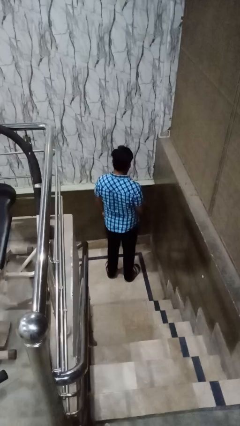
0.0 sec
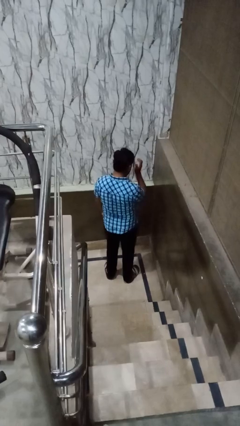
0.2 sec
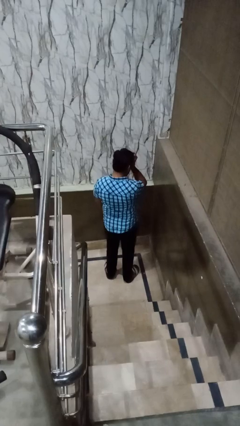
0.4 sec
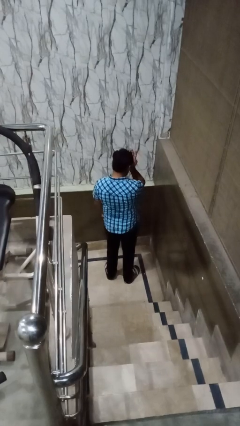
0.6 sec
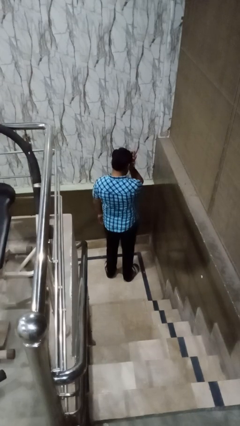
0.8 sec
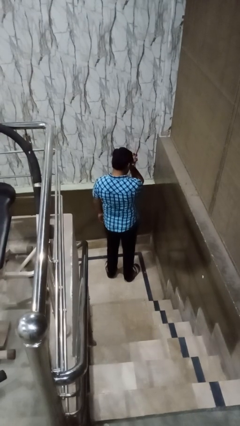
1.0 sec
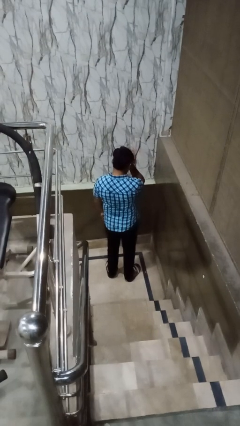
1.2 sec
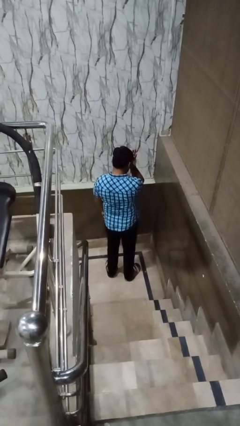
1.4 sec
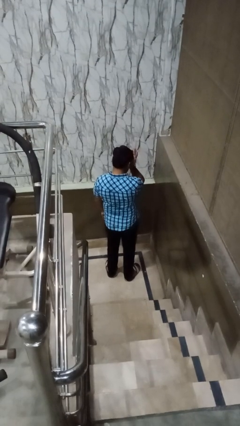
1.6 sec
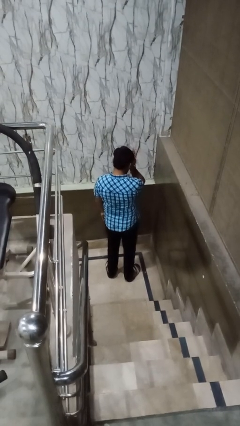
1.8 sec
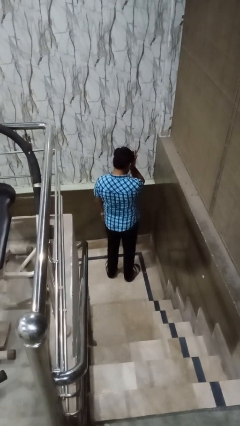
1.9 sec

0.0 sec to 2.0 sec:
person shades eyes

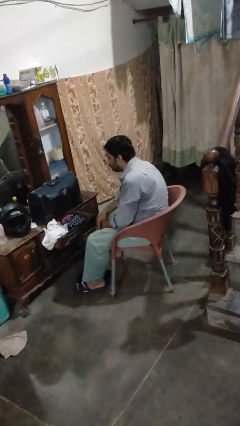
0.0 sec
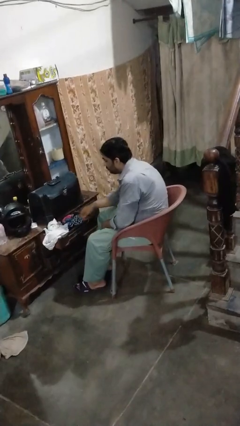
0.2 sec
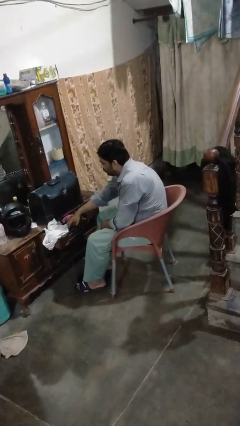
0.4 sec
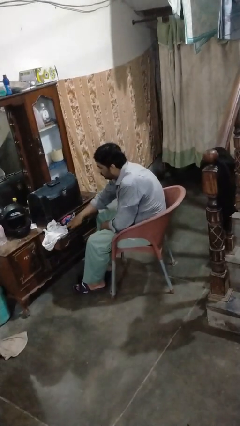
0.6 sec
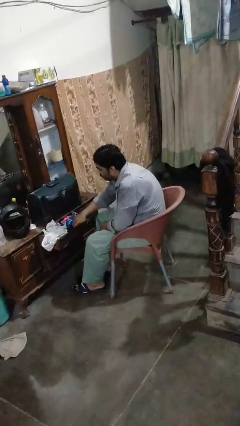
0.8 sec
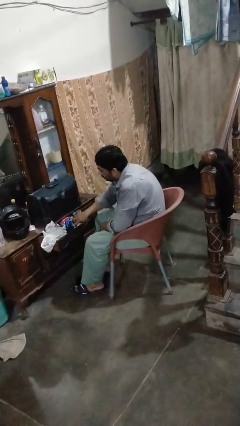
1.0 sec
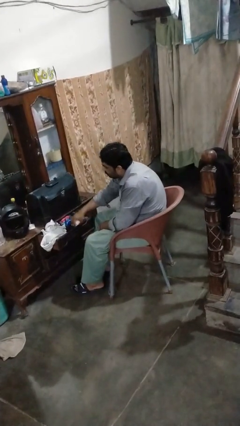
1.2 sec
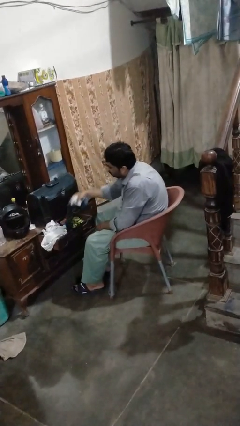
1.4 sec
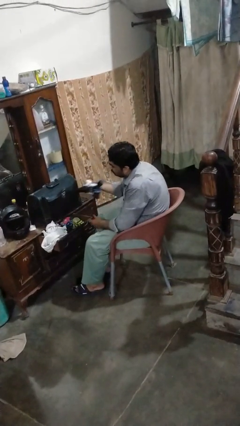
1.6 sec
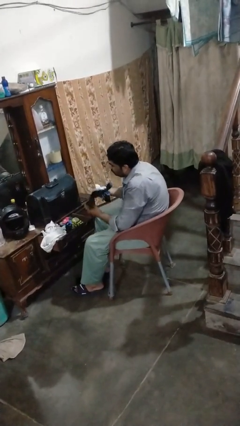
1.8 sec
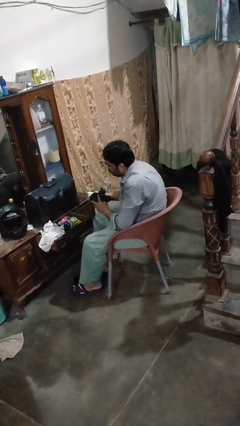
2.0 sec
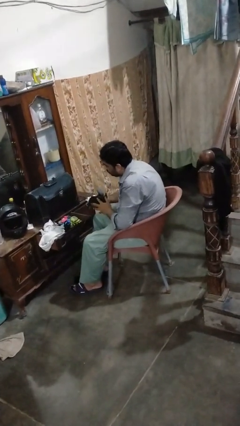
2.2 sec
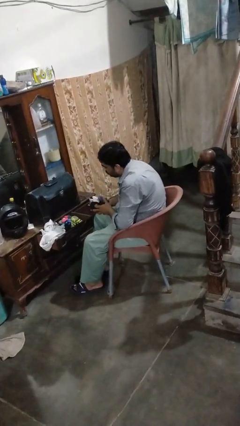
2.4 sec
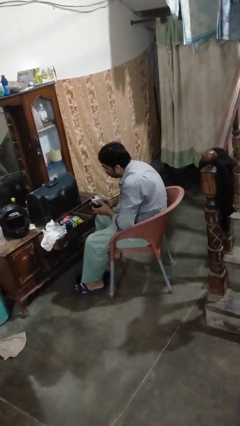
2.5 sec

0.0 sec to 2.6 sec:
person takes clothes from dresser

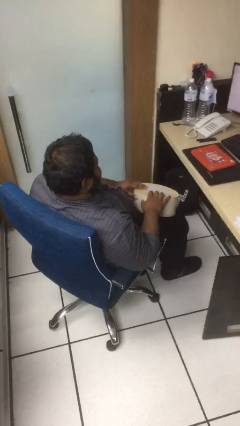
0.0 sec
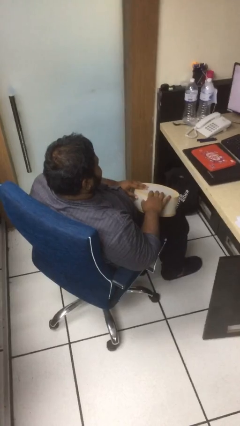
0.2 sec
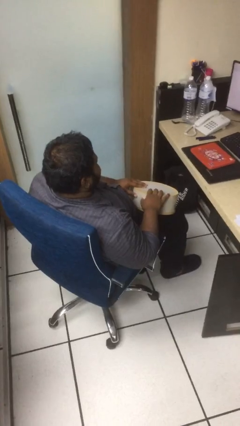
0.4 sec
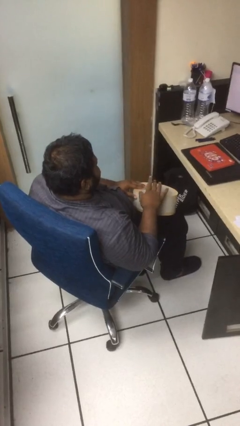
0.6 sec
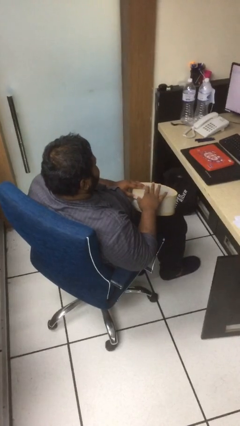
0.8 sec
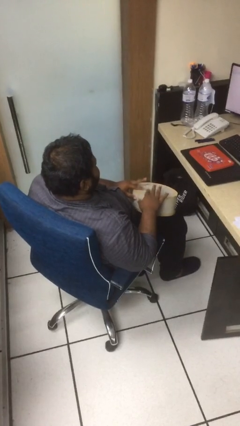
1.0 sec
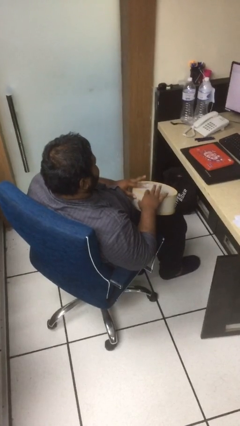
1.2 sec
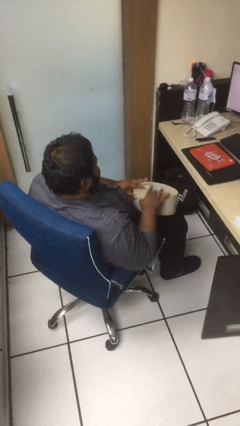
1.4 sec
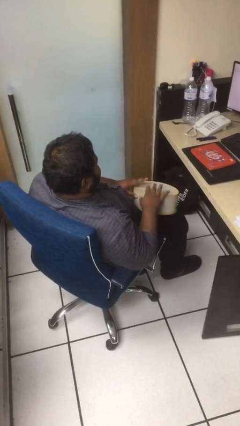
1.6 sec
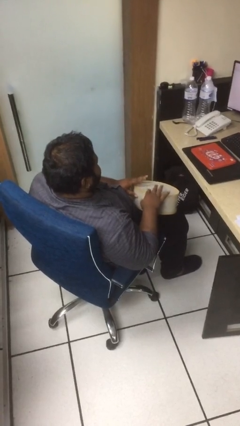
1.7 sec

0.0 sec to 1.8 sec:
person taps object with finger

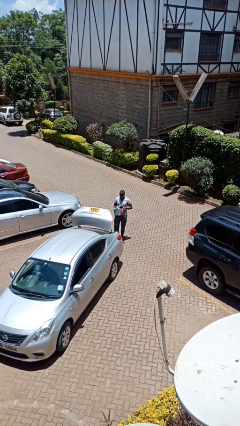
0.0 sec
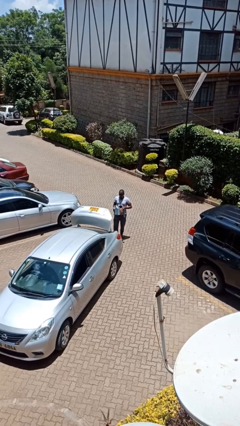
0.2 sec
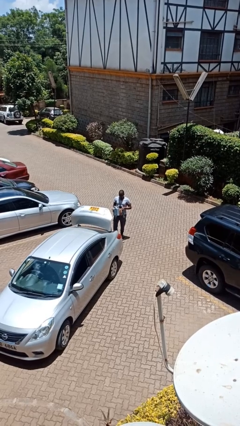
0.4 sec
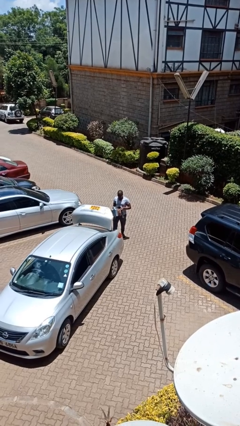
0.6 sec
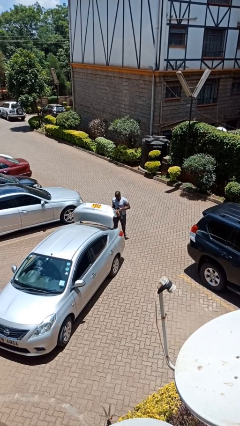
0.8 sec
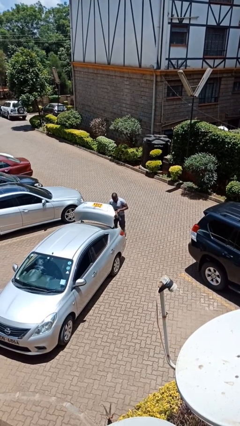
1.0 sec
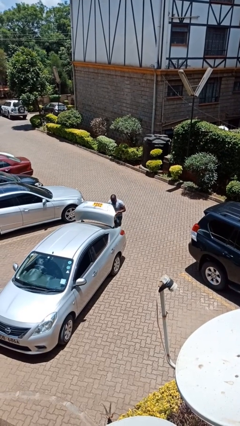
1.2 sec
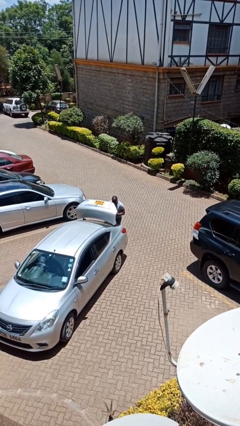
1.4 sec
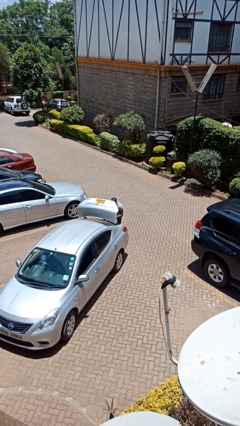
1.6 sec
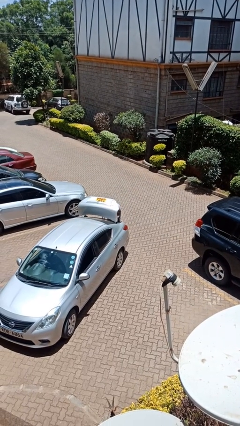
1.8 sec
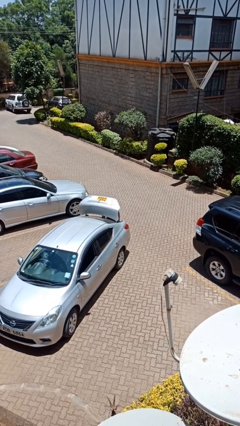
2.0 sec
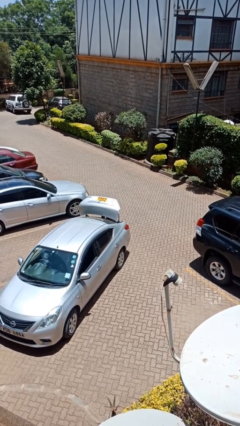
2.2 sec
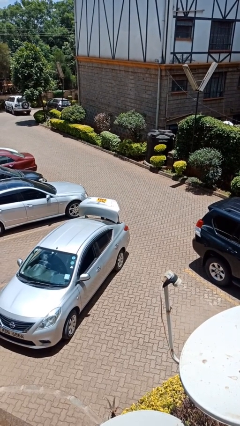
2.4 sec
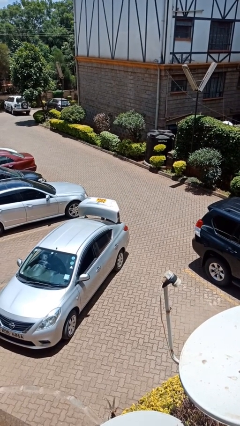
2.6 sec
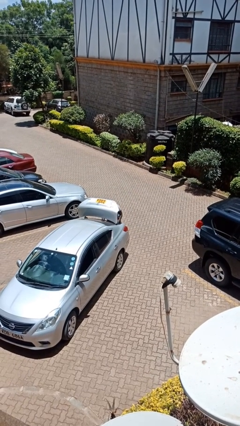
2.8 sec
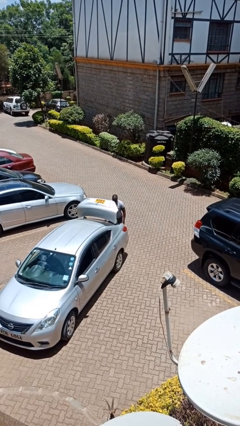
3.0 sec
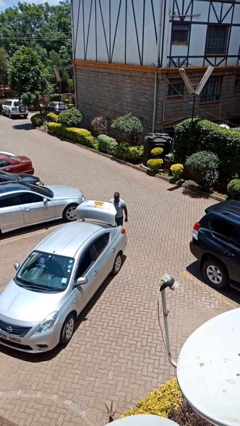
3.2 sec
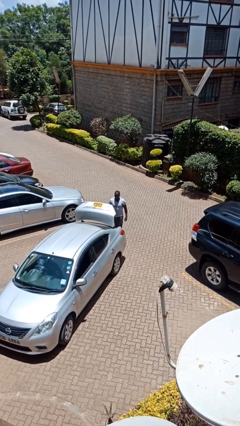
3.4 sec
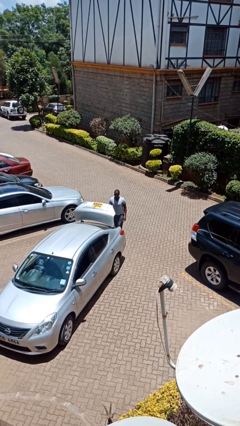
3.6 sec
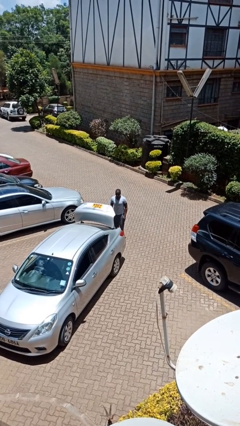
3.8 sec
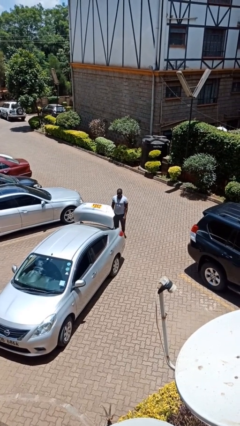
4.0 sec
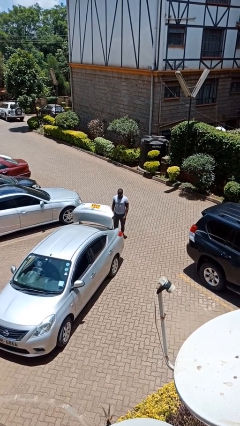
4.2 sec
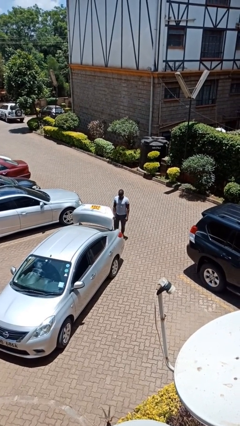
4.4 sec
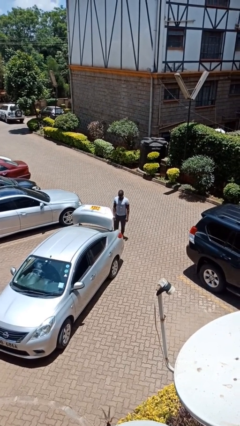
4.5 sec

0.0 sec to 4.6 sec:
person loads car

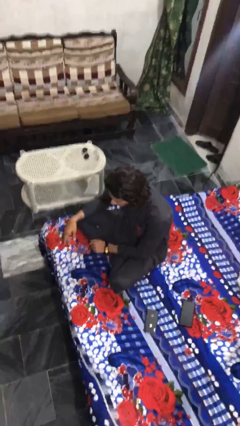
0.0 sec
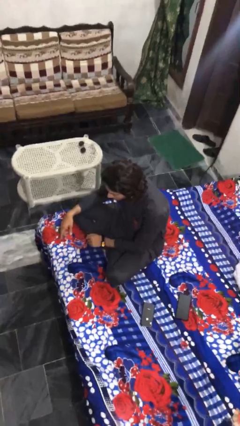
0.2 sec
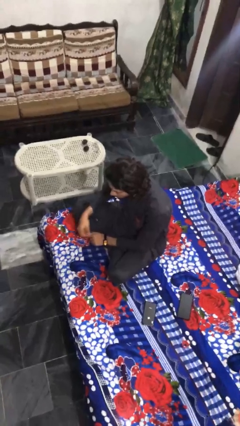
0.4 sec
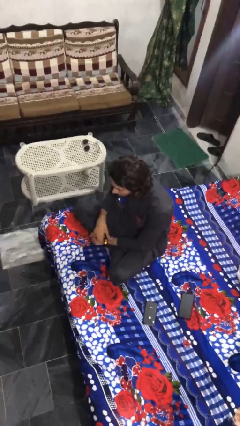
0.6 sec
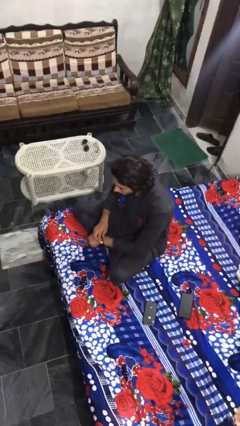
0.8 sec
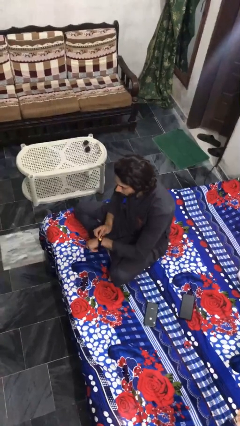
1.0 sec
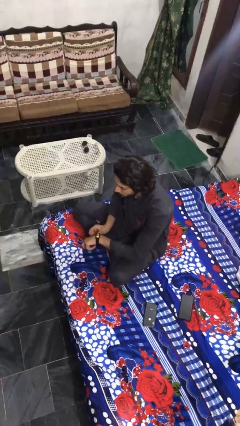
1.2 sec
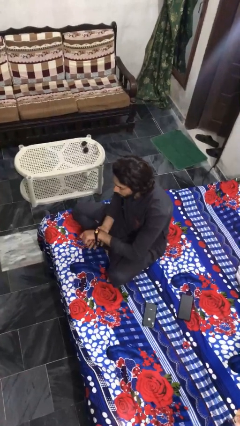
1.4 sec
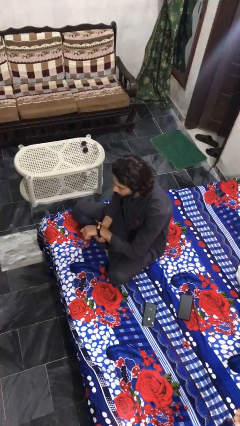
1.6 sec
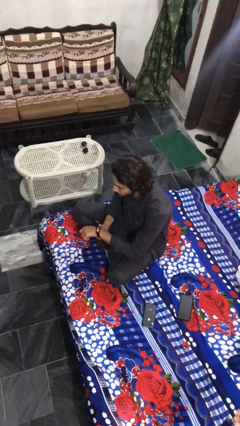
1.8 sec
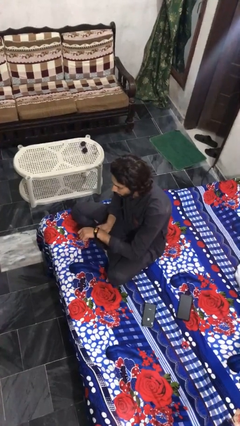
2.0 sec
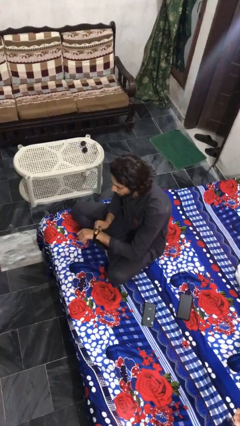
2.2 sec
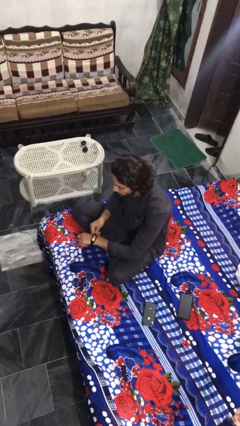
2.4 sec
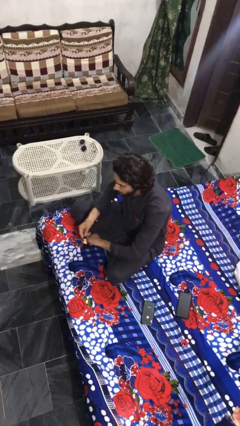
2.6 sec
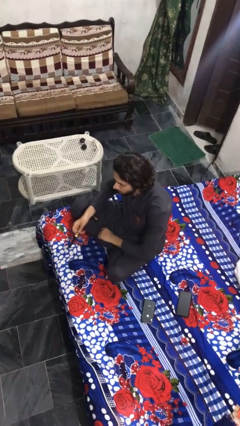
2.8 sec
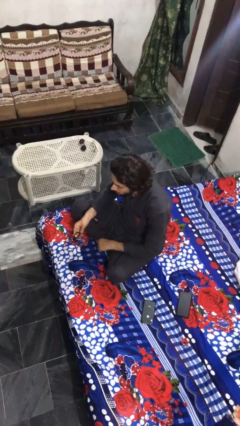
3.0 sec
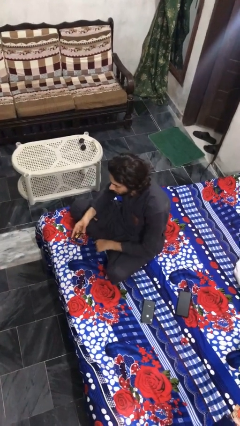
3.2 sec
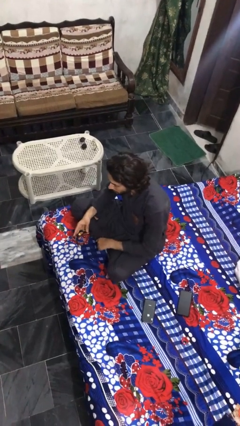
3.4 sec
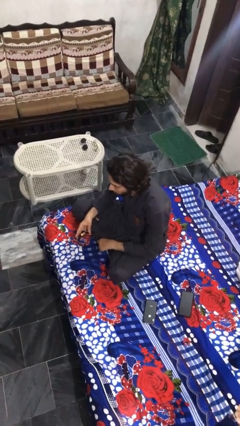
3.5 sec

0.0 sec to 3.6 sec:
person takes off wristwatch

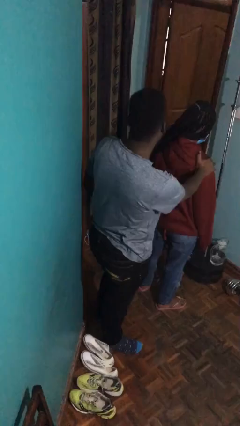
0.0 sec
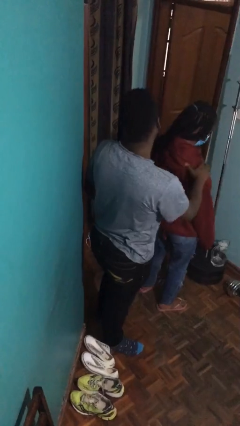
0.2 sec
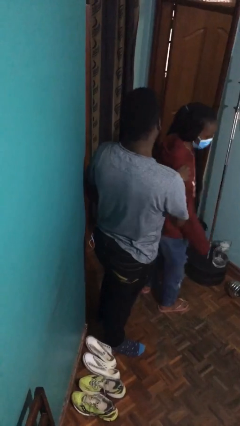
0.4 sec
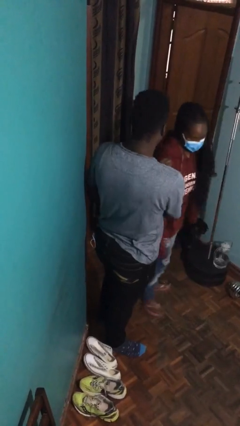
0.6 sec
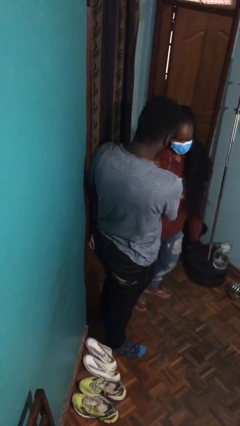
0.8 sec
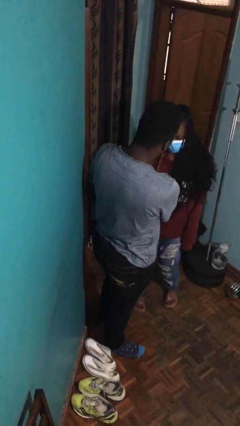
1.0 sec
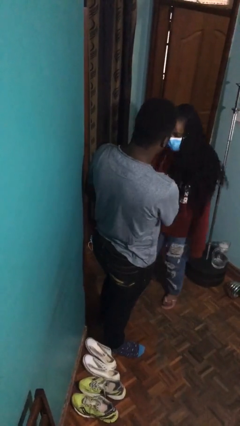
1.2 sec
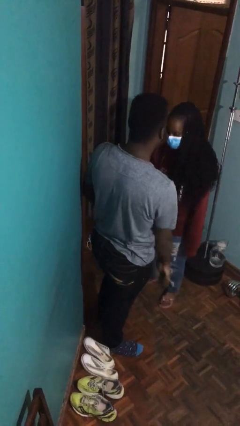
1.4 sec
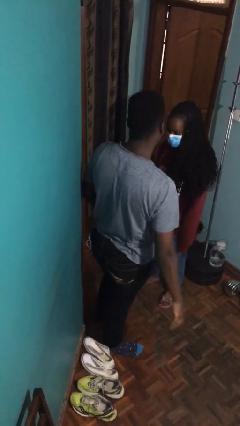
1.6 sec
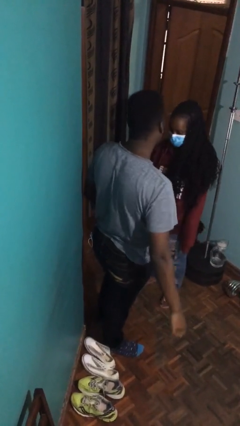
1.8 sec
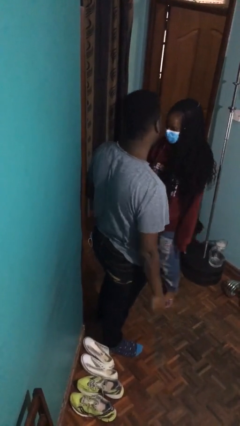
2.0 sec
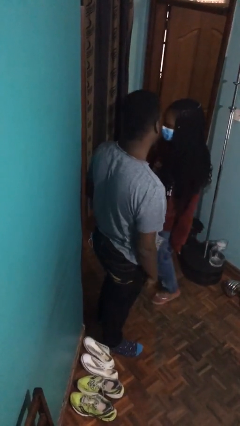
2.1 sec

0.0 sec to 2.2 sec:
person spins person around

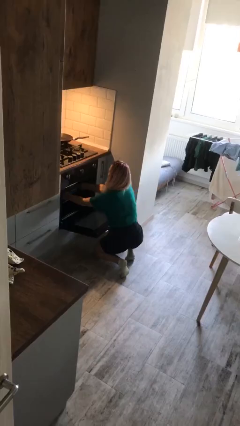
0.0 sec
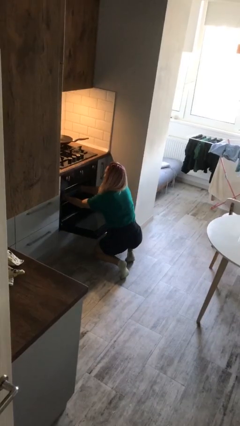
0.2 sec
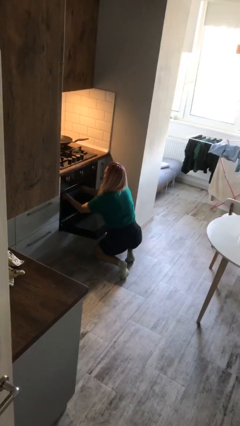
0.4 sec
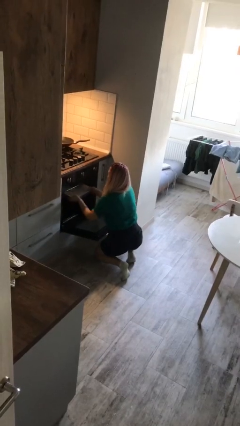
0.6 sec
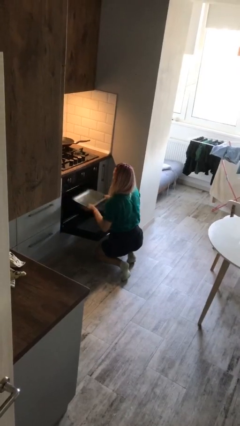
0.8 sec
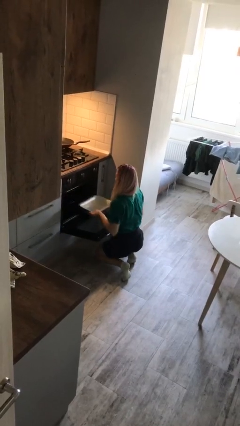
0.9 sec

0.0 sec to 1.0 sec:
person takes object from oven
